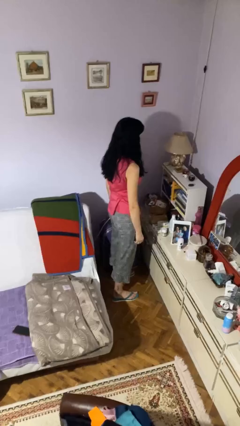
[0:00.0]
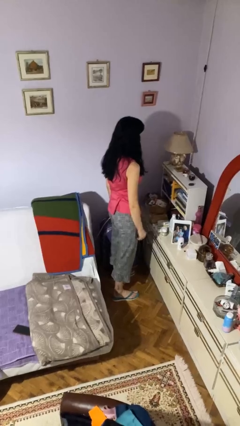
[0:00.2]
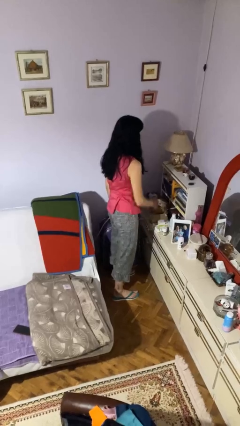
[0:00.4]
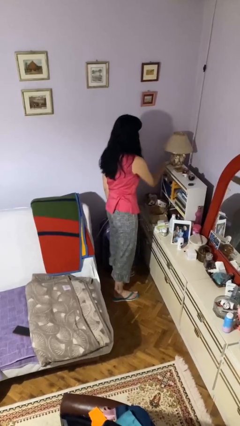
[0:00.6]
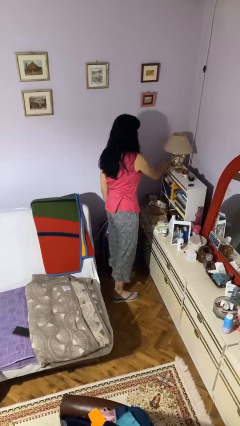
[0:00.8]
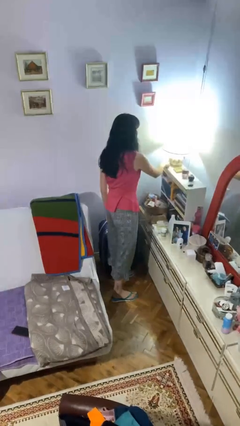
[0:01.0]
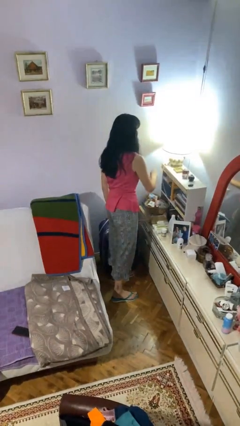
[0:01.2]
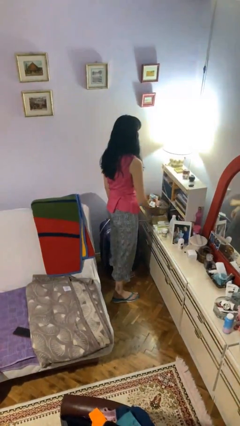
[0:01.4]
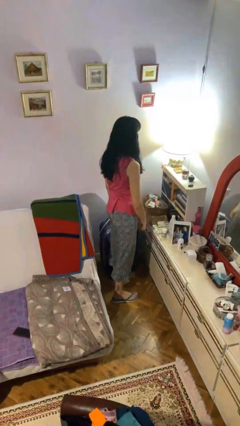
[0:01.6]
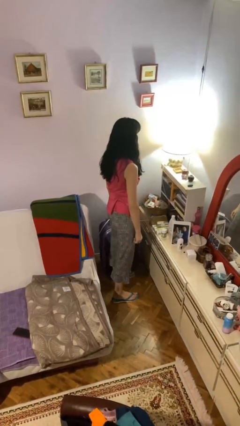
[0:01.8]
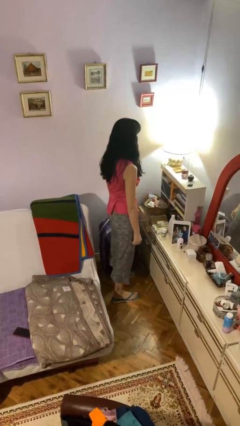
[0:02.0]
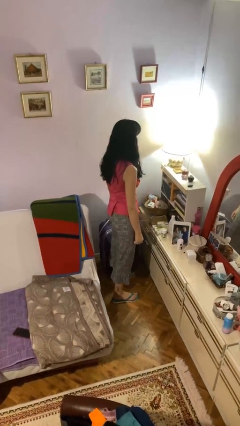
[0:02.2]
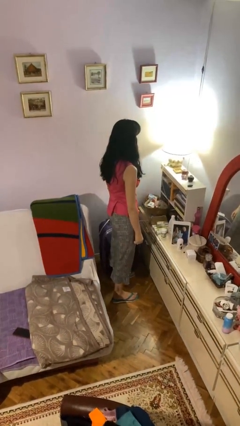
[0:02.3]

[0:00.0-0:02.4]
person turns on lamp

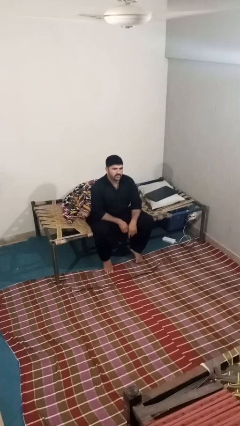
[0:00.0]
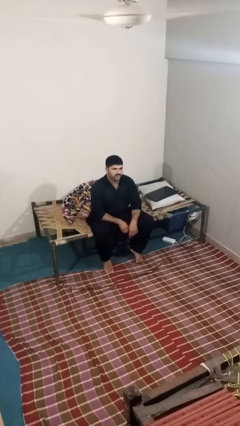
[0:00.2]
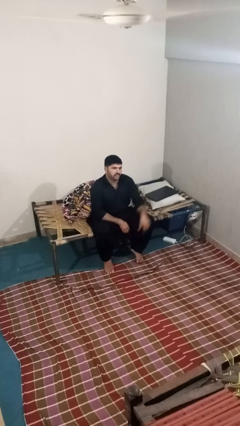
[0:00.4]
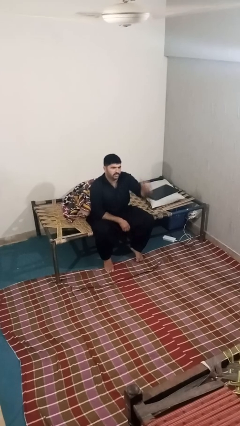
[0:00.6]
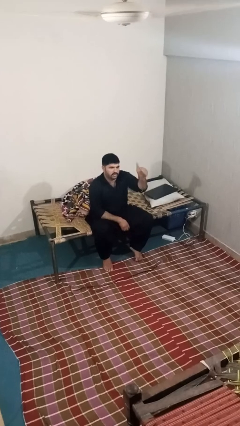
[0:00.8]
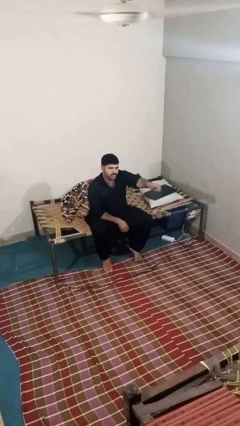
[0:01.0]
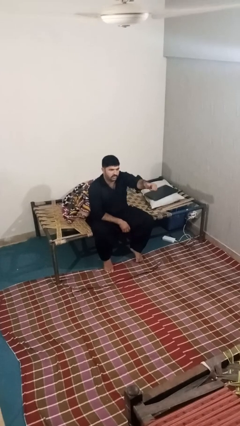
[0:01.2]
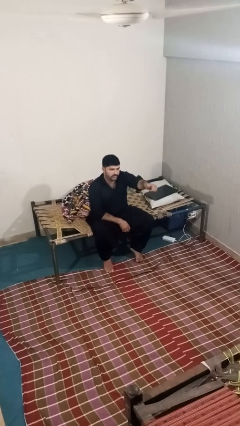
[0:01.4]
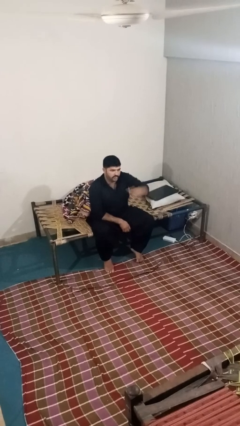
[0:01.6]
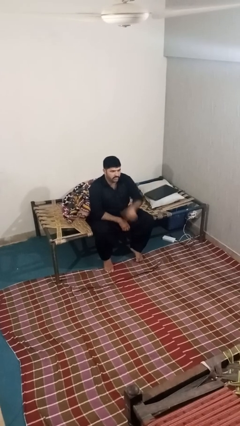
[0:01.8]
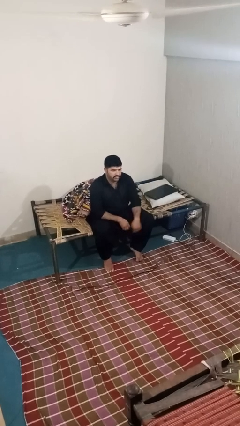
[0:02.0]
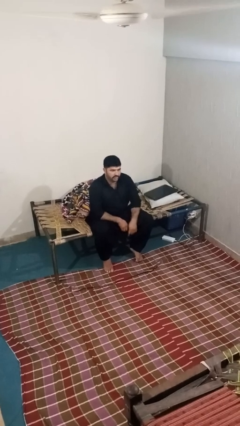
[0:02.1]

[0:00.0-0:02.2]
person gestures thumbs up

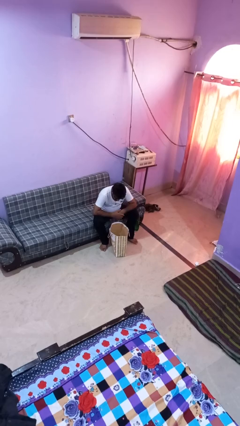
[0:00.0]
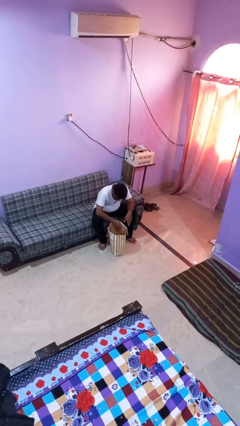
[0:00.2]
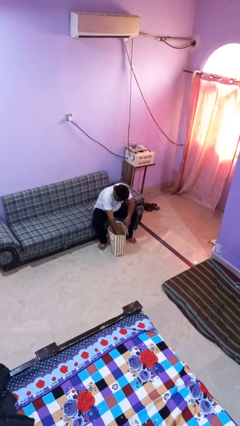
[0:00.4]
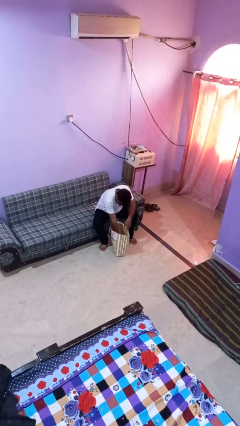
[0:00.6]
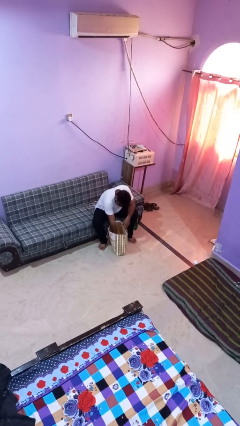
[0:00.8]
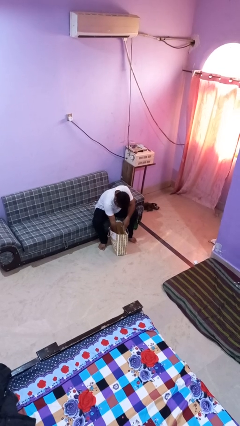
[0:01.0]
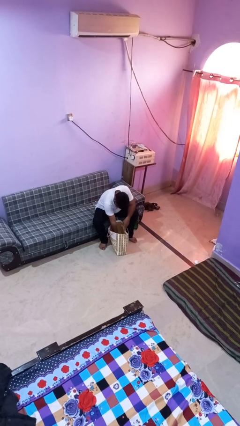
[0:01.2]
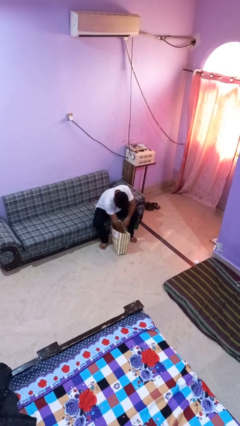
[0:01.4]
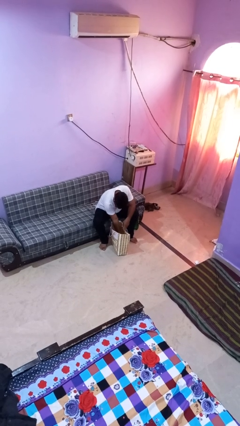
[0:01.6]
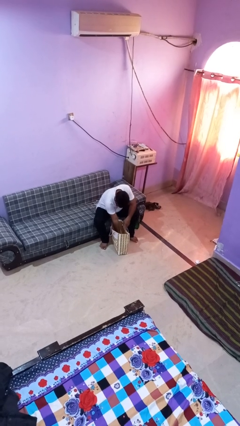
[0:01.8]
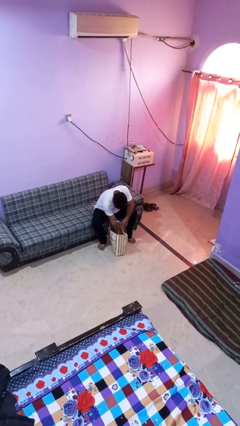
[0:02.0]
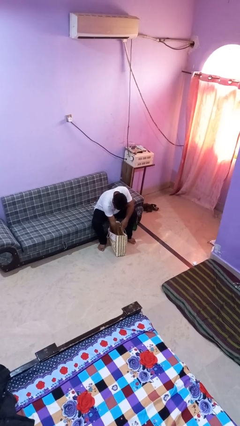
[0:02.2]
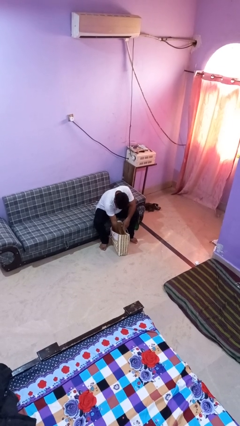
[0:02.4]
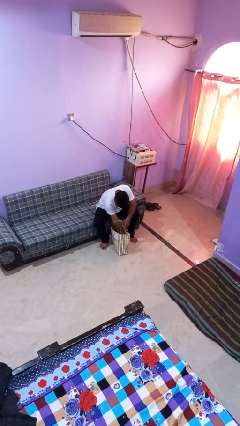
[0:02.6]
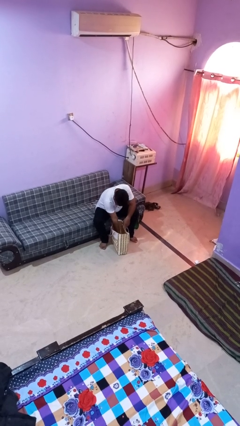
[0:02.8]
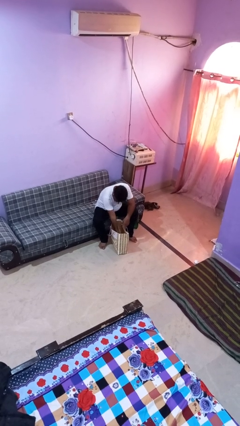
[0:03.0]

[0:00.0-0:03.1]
person searches in bag

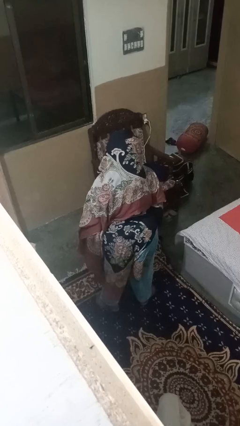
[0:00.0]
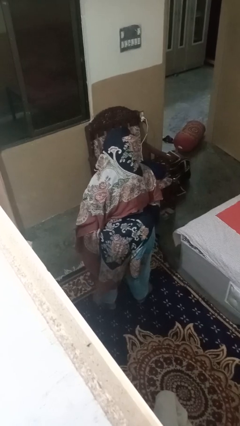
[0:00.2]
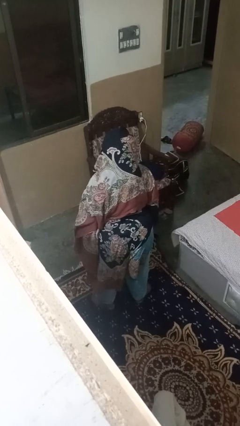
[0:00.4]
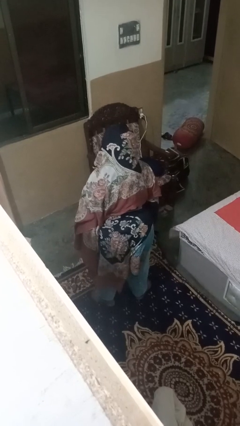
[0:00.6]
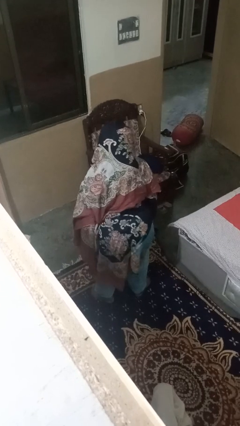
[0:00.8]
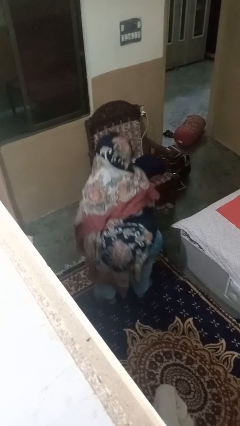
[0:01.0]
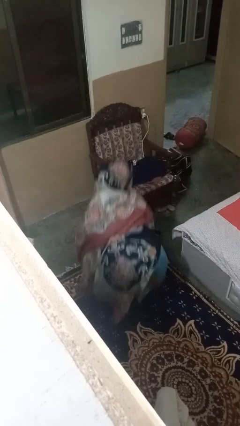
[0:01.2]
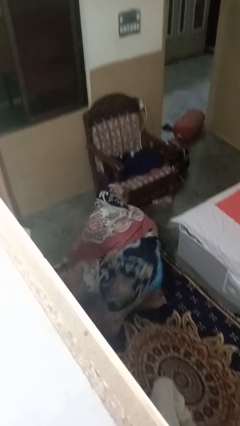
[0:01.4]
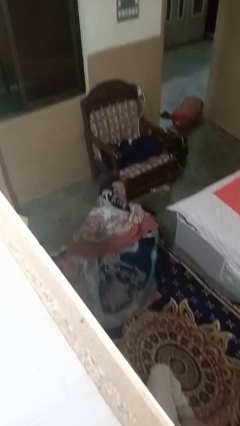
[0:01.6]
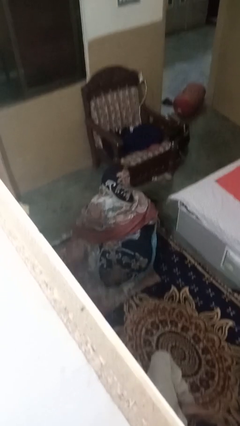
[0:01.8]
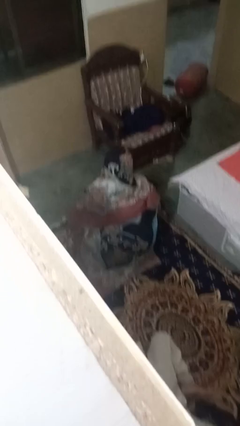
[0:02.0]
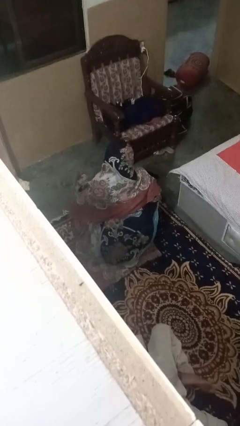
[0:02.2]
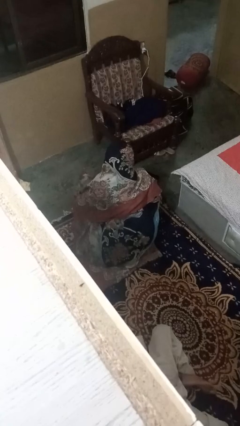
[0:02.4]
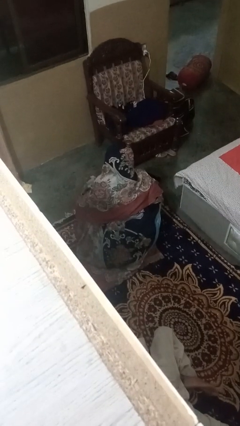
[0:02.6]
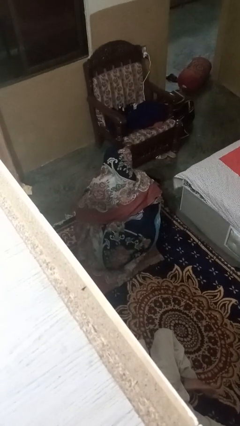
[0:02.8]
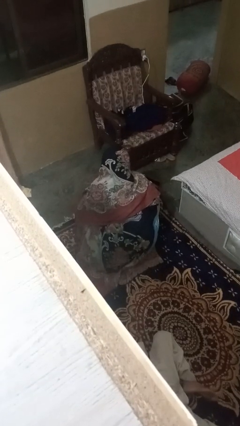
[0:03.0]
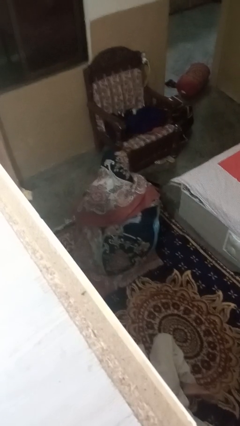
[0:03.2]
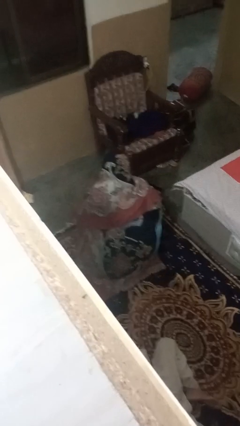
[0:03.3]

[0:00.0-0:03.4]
person squats

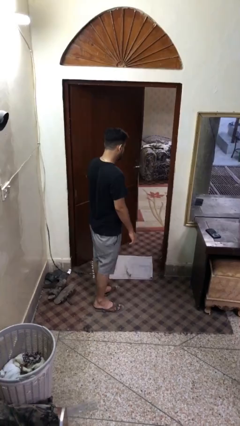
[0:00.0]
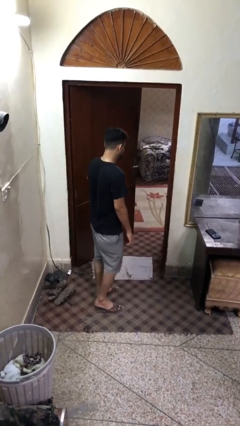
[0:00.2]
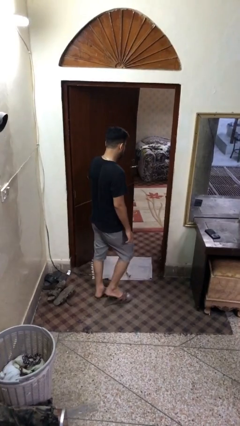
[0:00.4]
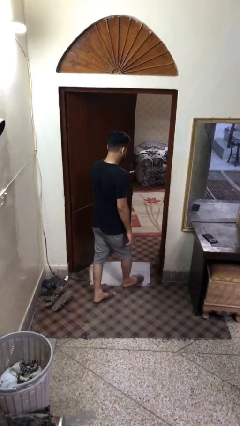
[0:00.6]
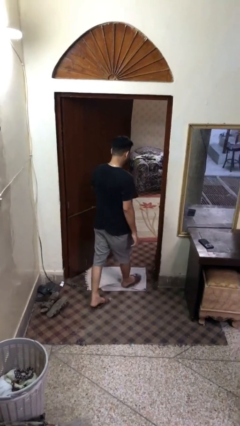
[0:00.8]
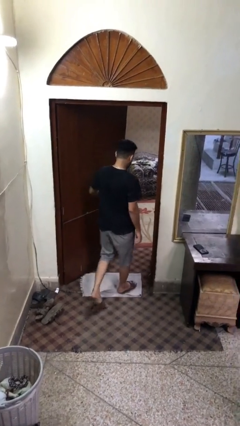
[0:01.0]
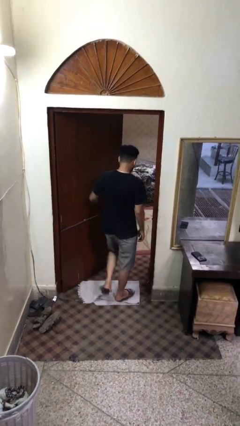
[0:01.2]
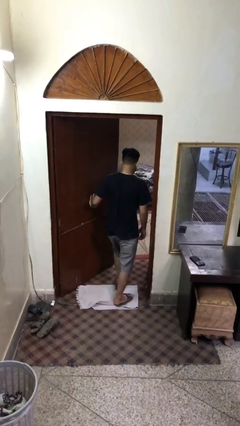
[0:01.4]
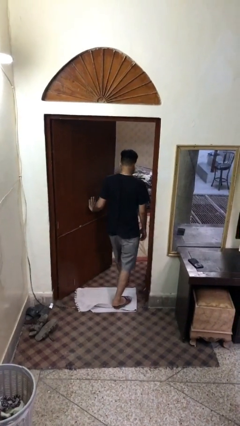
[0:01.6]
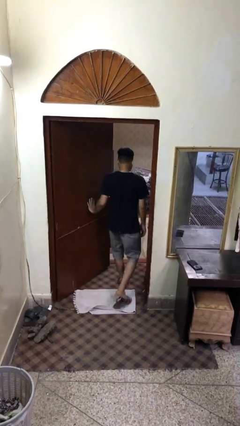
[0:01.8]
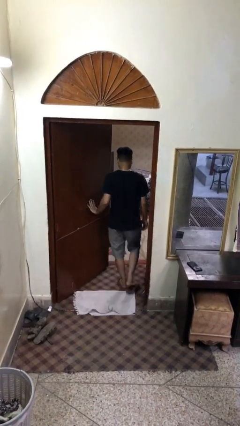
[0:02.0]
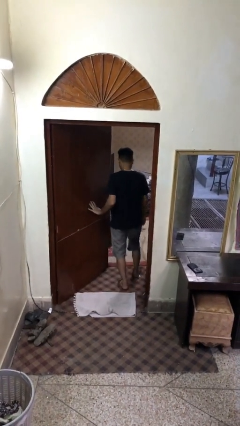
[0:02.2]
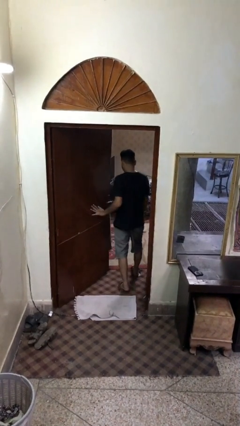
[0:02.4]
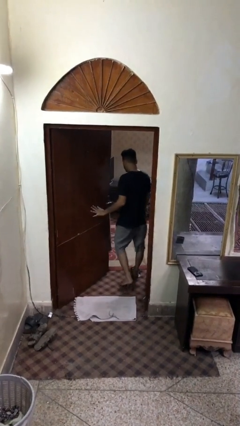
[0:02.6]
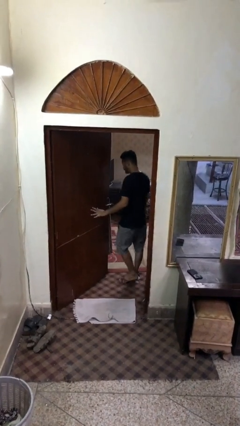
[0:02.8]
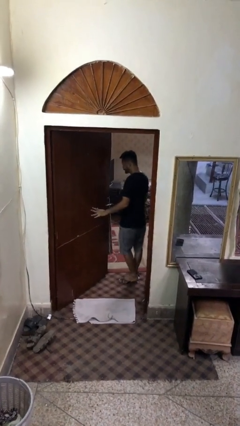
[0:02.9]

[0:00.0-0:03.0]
person exits scene through structure

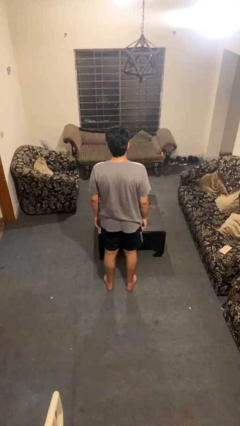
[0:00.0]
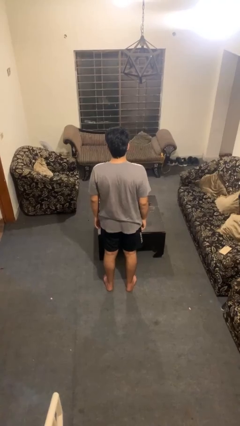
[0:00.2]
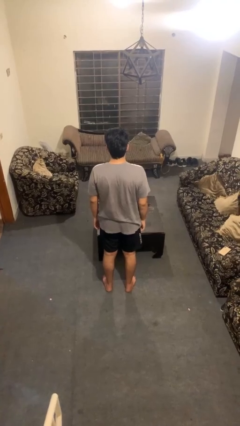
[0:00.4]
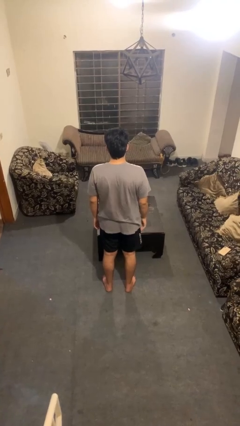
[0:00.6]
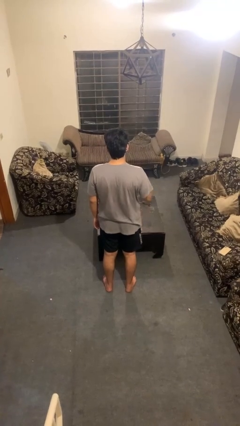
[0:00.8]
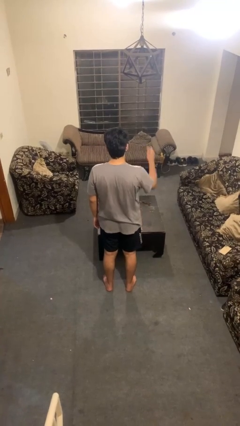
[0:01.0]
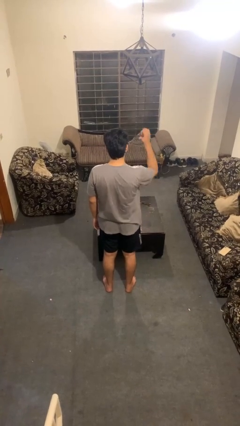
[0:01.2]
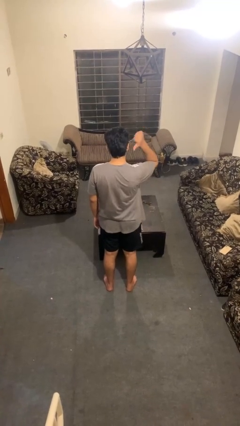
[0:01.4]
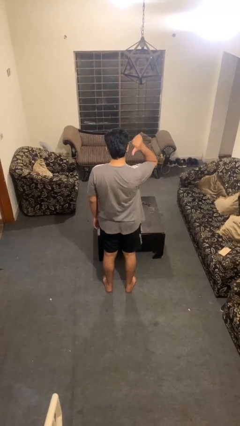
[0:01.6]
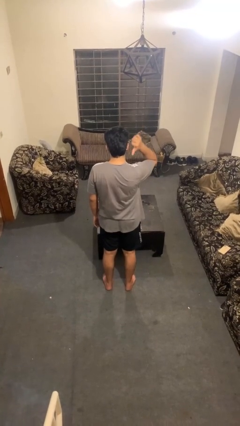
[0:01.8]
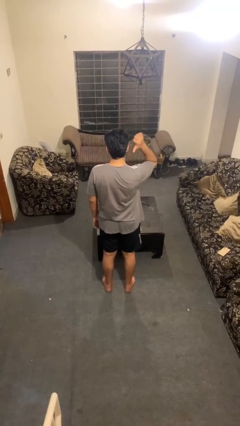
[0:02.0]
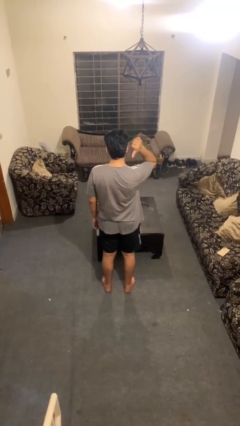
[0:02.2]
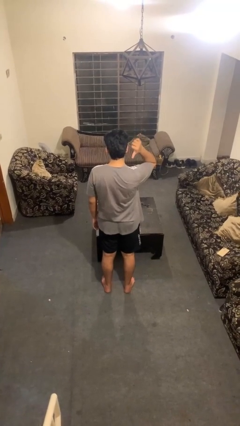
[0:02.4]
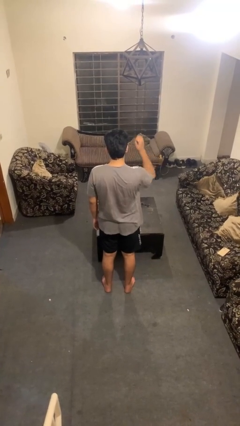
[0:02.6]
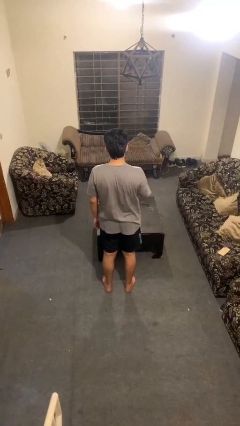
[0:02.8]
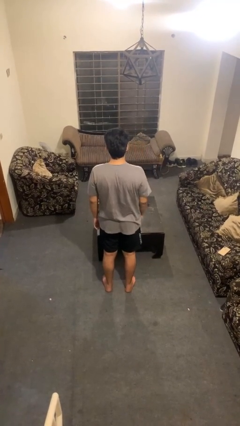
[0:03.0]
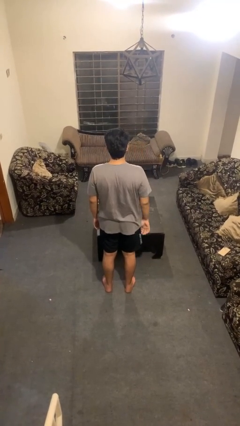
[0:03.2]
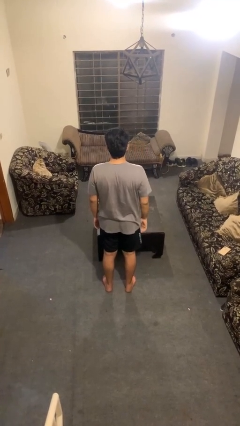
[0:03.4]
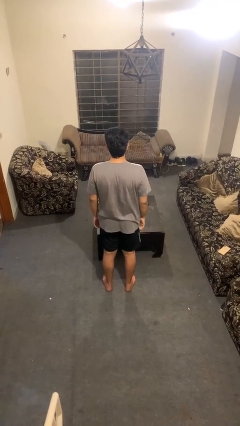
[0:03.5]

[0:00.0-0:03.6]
person gestures behind me
